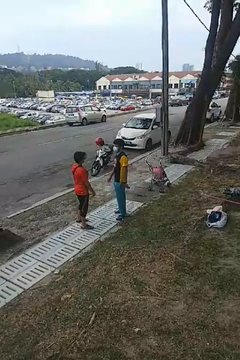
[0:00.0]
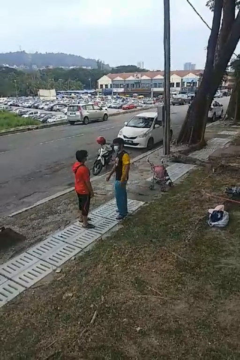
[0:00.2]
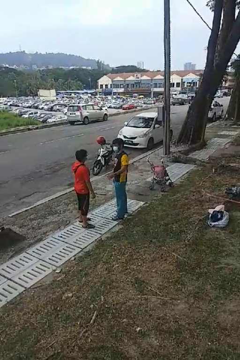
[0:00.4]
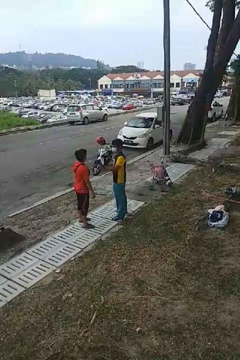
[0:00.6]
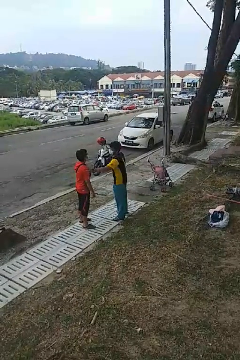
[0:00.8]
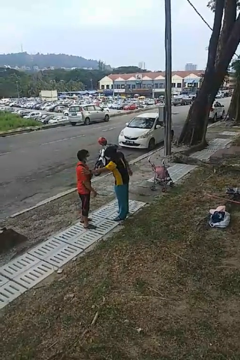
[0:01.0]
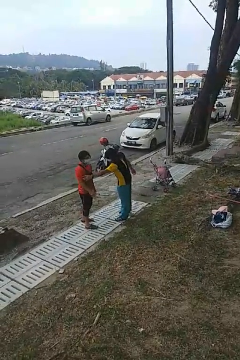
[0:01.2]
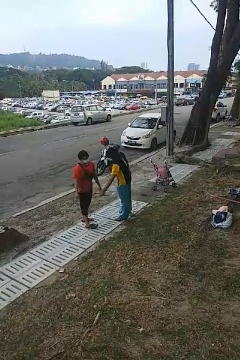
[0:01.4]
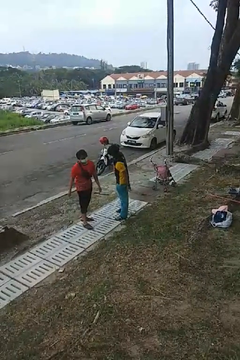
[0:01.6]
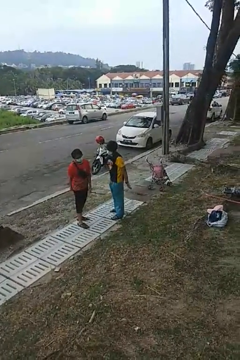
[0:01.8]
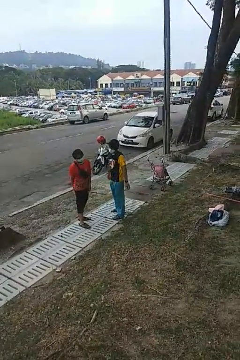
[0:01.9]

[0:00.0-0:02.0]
person shoves person

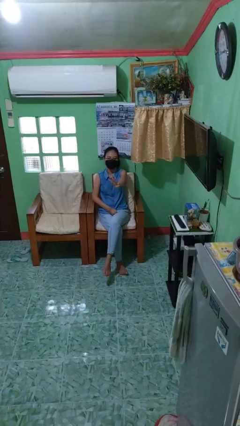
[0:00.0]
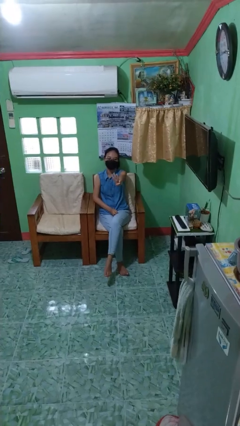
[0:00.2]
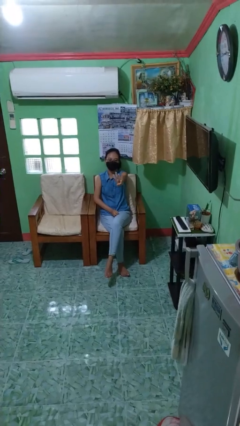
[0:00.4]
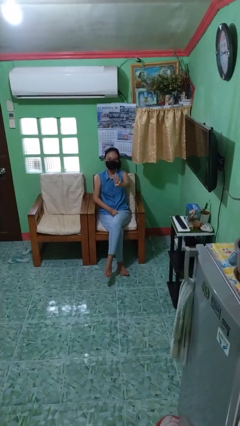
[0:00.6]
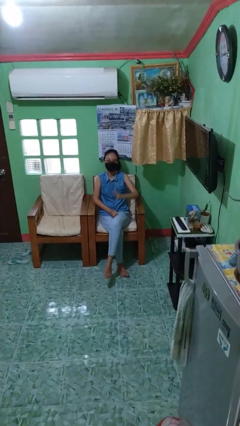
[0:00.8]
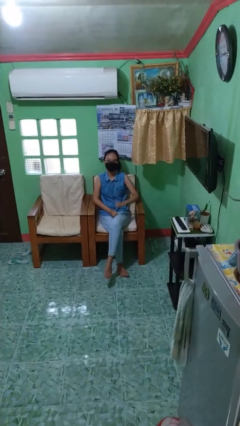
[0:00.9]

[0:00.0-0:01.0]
person gestures number three

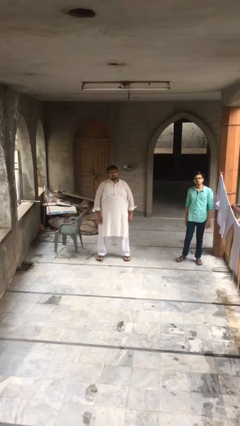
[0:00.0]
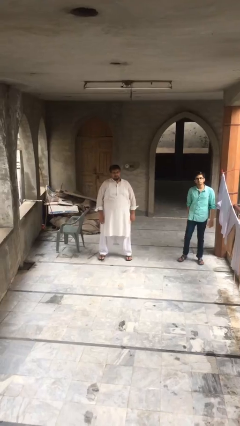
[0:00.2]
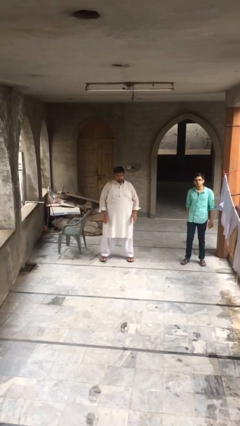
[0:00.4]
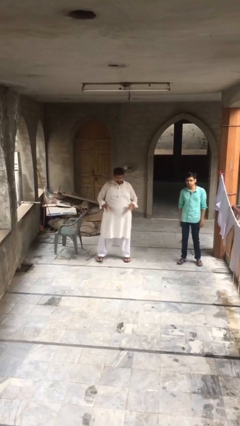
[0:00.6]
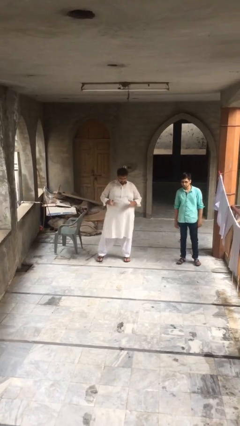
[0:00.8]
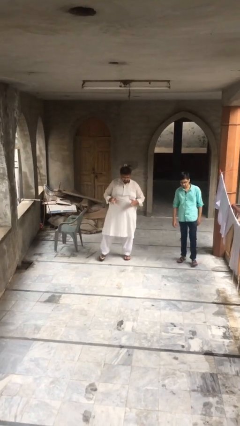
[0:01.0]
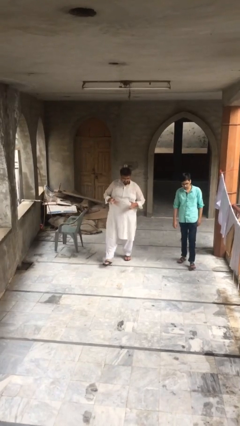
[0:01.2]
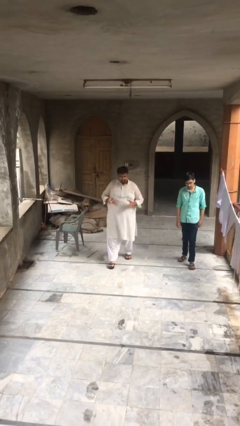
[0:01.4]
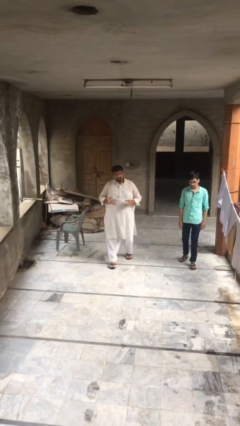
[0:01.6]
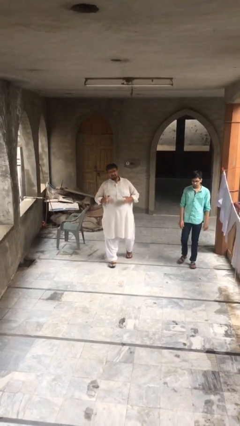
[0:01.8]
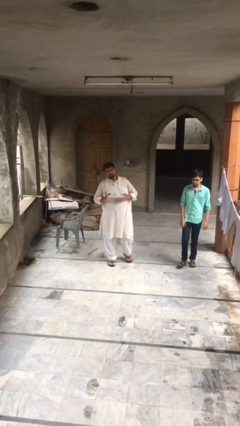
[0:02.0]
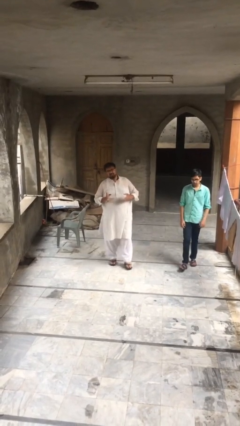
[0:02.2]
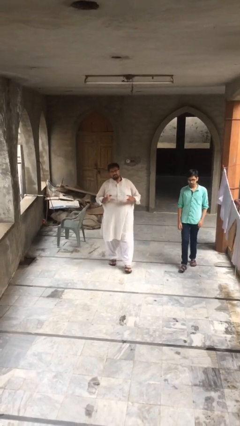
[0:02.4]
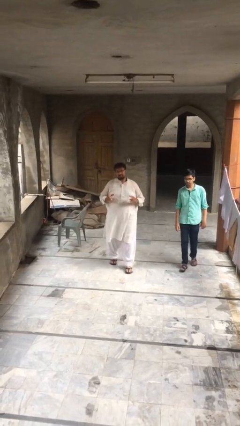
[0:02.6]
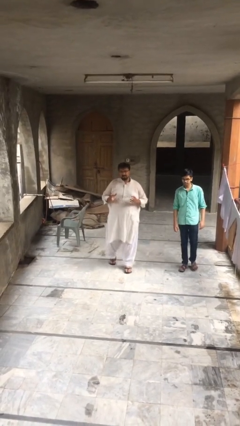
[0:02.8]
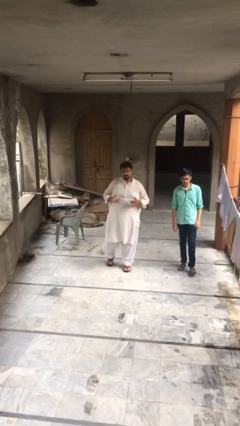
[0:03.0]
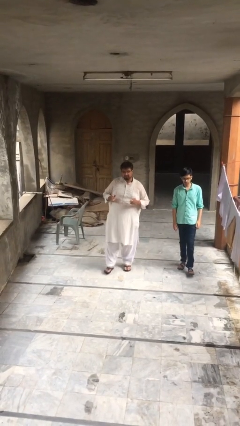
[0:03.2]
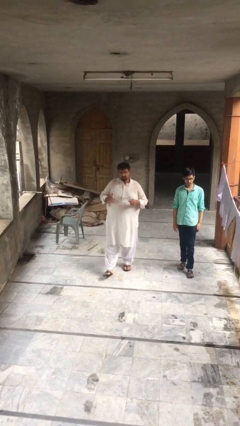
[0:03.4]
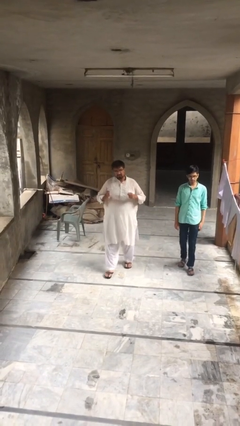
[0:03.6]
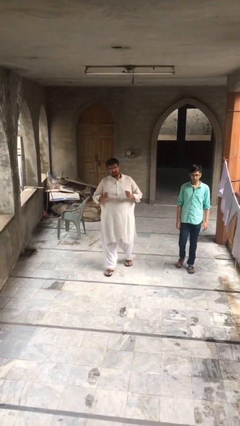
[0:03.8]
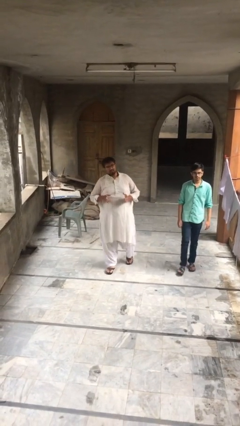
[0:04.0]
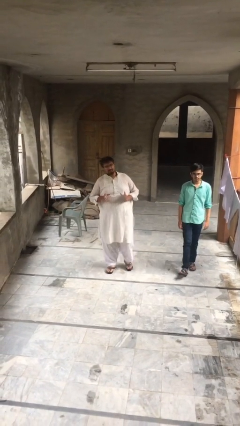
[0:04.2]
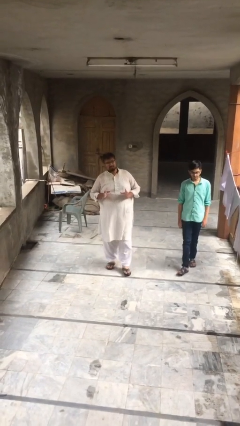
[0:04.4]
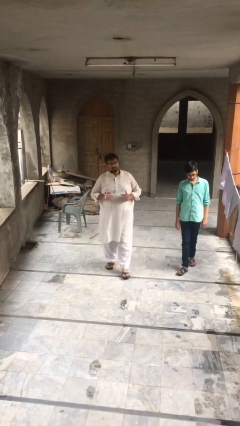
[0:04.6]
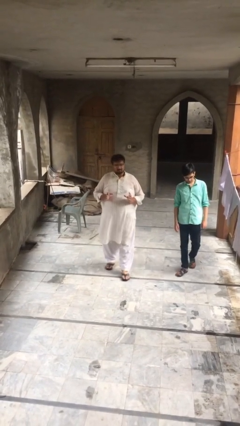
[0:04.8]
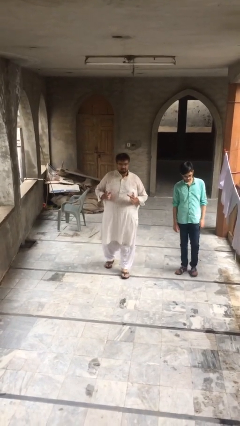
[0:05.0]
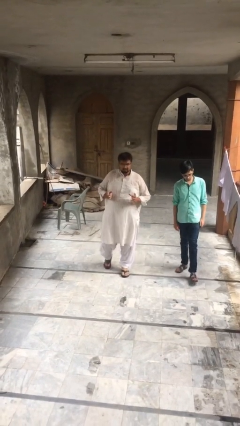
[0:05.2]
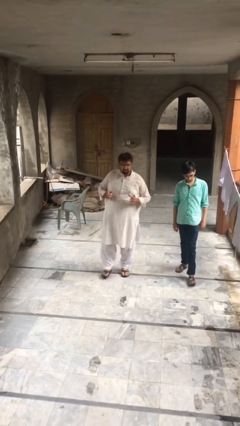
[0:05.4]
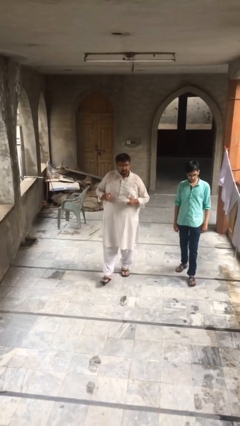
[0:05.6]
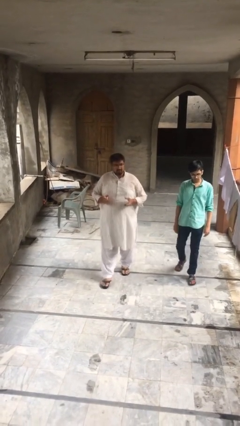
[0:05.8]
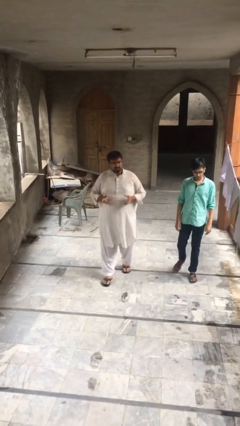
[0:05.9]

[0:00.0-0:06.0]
person talks to person

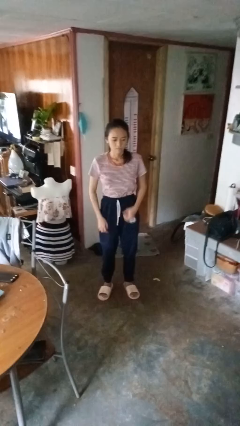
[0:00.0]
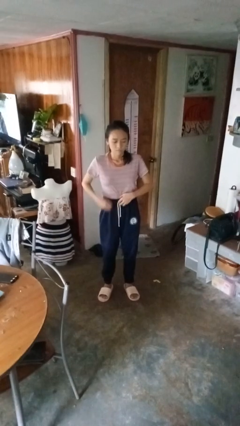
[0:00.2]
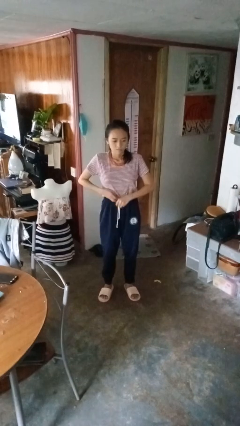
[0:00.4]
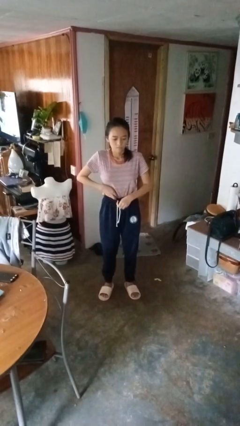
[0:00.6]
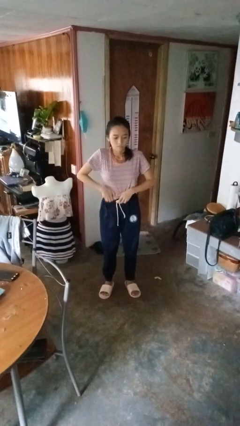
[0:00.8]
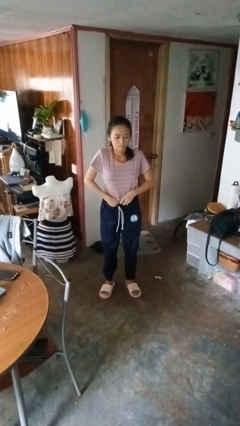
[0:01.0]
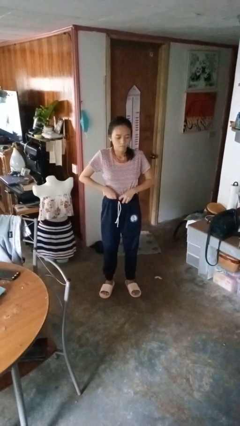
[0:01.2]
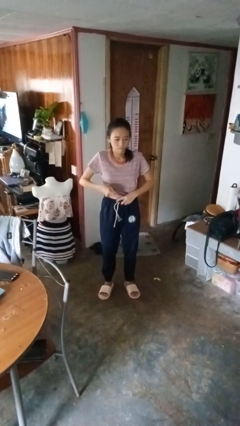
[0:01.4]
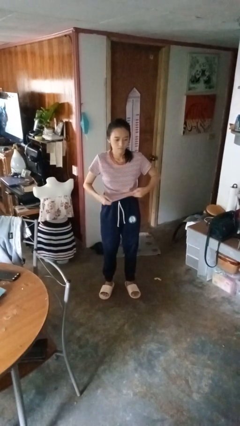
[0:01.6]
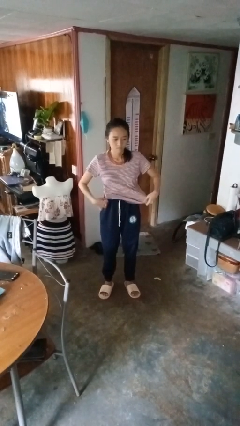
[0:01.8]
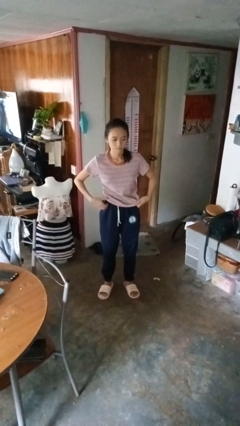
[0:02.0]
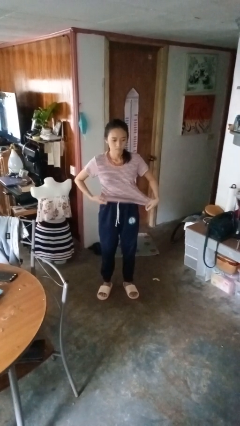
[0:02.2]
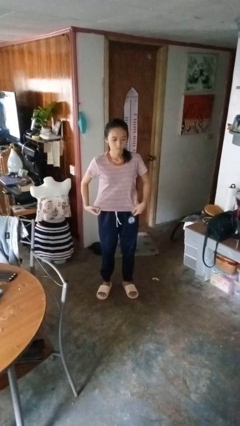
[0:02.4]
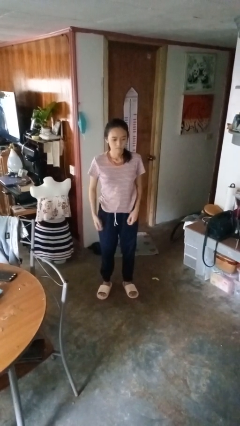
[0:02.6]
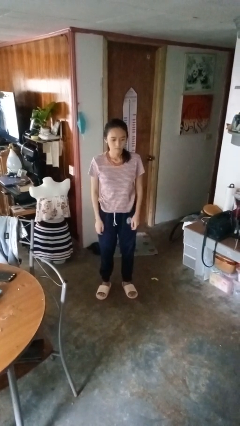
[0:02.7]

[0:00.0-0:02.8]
person untucks shirt

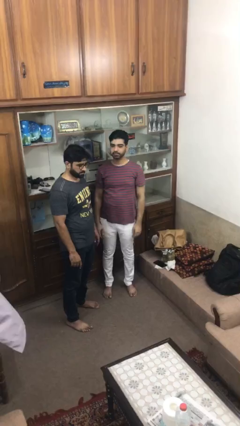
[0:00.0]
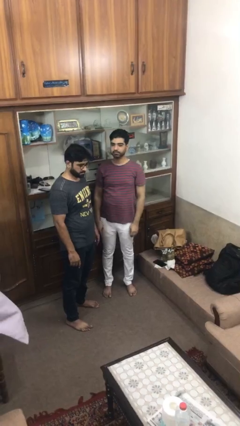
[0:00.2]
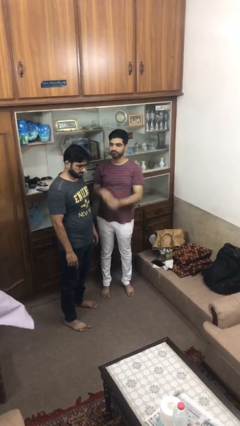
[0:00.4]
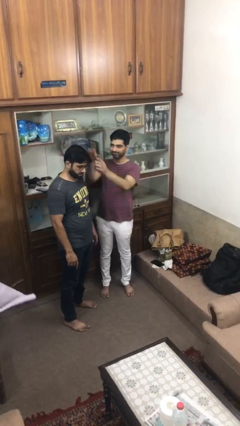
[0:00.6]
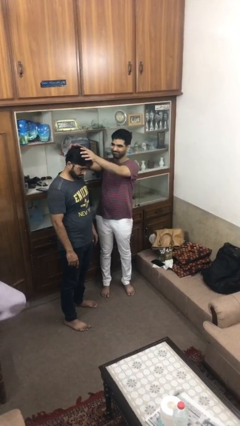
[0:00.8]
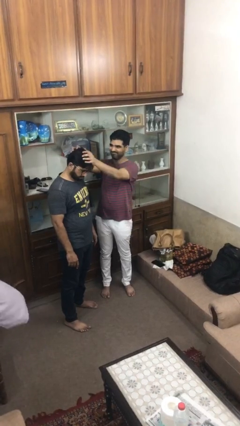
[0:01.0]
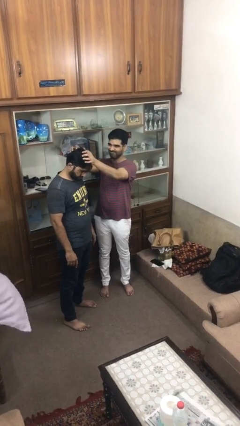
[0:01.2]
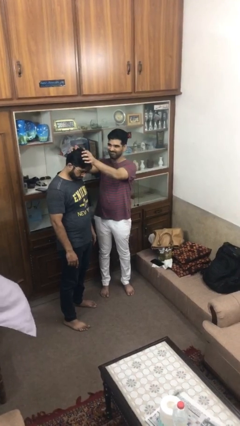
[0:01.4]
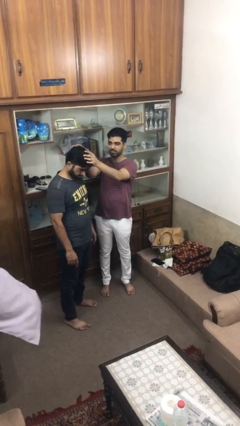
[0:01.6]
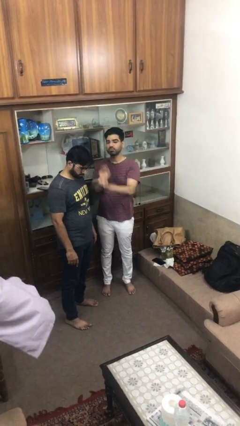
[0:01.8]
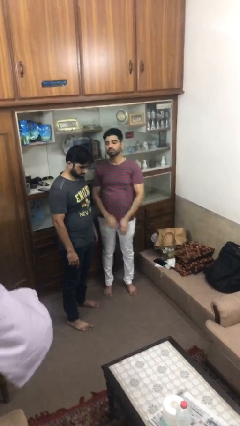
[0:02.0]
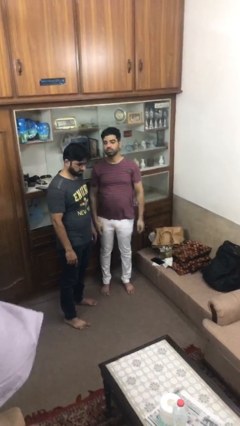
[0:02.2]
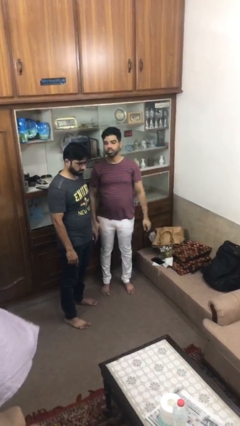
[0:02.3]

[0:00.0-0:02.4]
person grabs person by hair

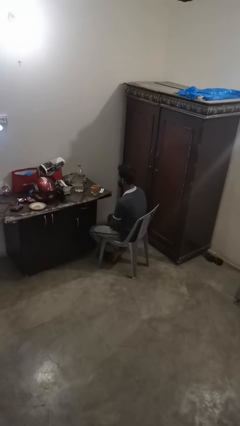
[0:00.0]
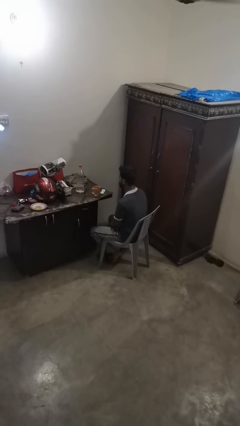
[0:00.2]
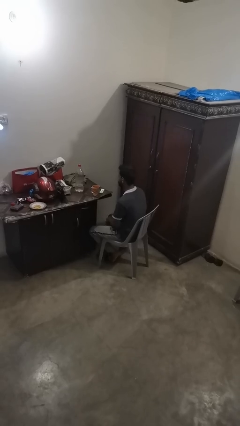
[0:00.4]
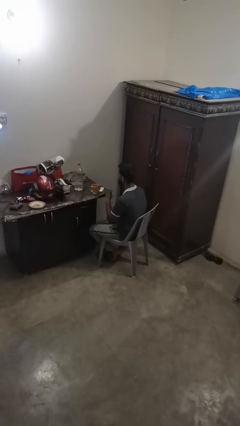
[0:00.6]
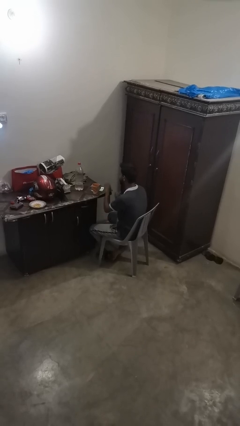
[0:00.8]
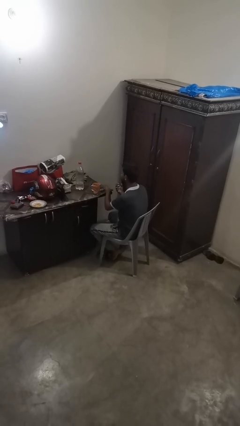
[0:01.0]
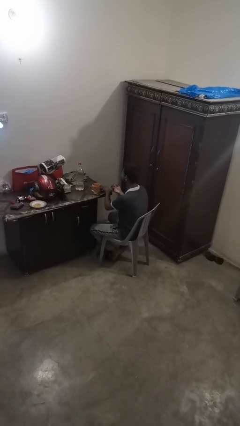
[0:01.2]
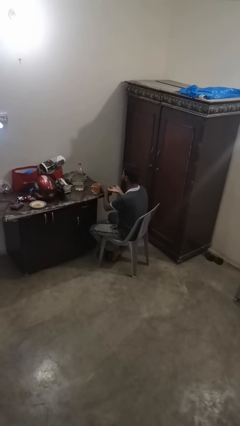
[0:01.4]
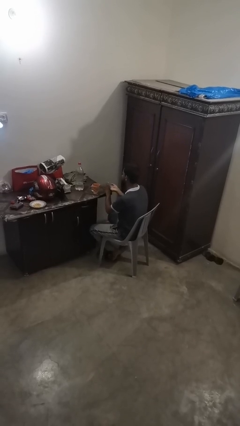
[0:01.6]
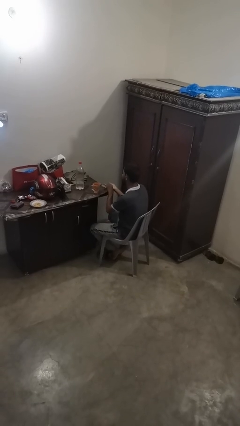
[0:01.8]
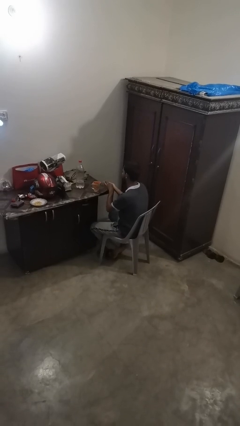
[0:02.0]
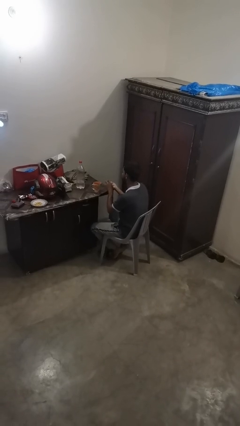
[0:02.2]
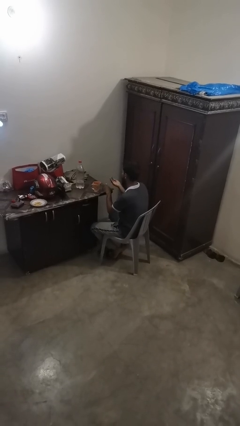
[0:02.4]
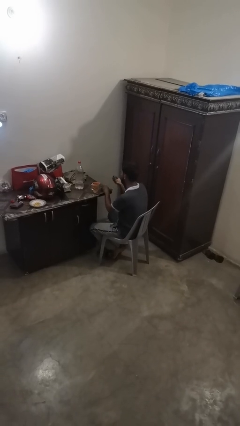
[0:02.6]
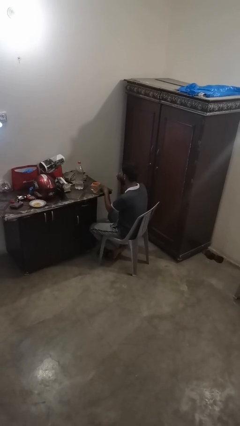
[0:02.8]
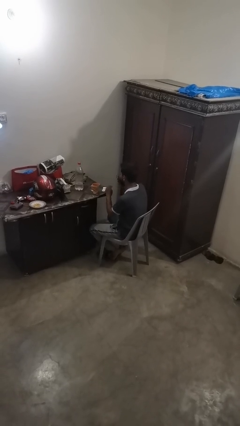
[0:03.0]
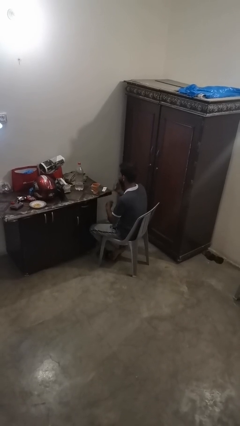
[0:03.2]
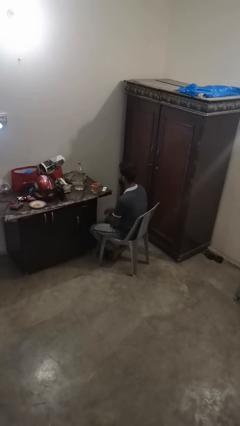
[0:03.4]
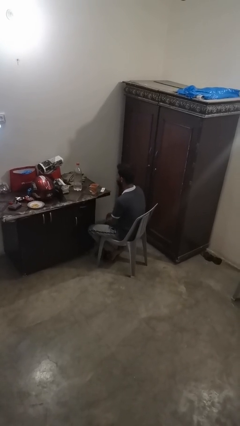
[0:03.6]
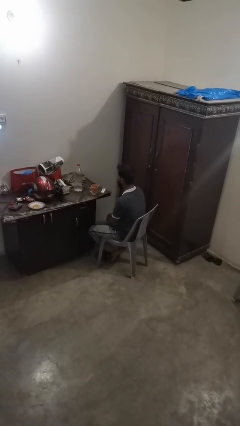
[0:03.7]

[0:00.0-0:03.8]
person takes medicine pills
